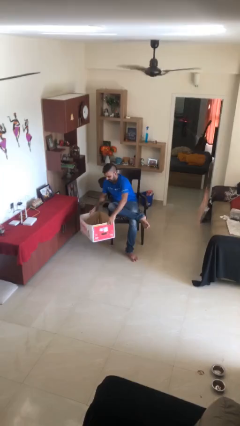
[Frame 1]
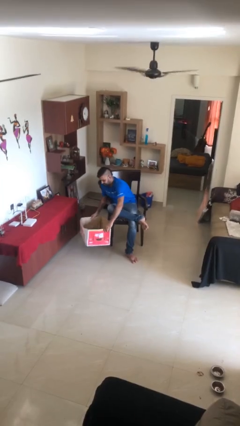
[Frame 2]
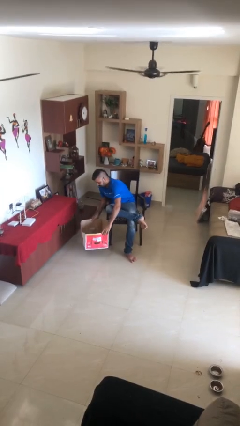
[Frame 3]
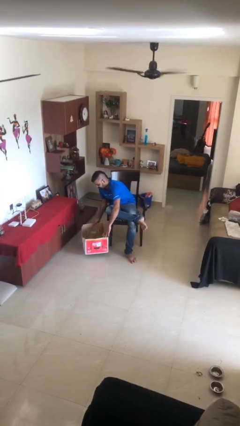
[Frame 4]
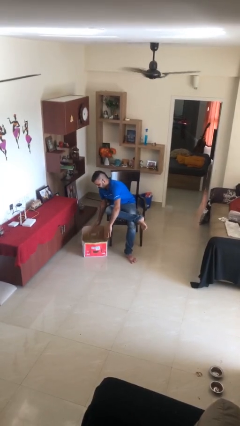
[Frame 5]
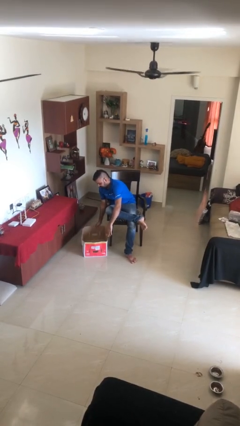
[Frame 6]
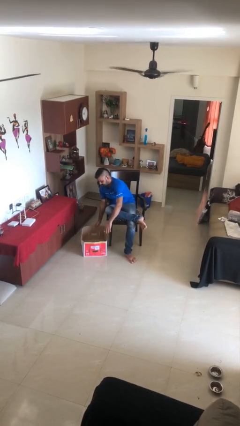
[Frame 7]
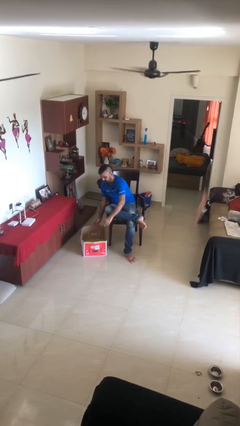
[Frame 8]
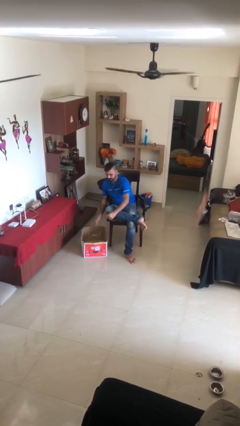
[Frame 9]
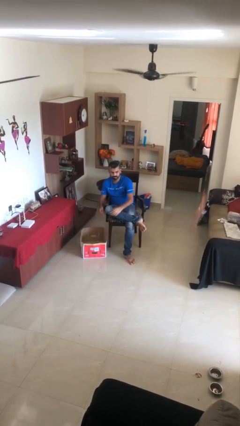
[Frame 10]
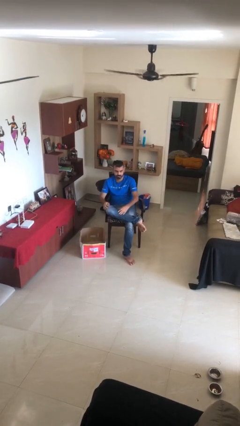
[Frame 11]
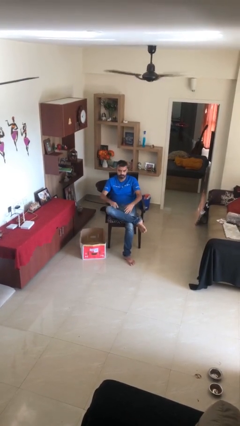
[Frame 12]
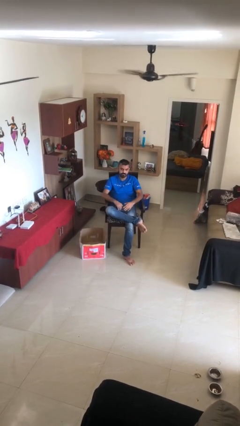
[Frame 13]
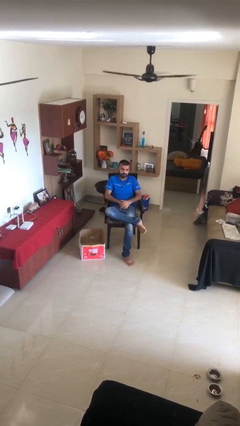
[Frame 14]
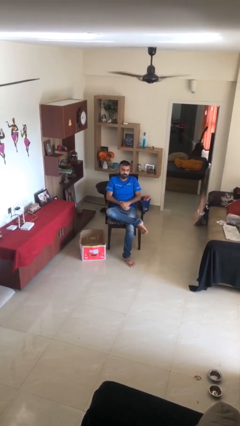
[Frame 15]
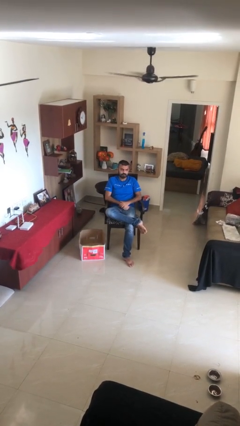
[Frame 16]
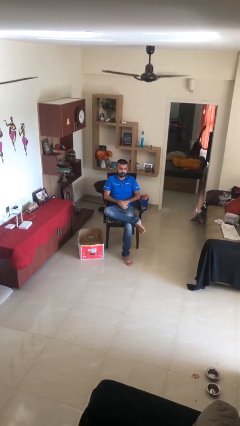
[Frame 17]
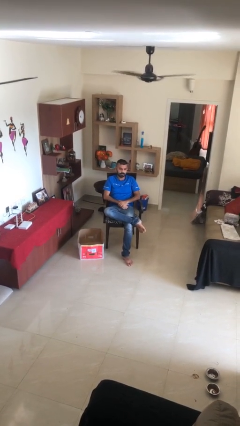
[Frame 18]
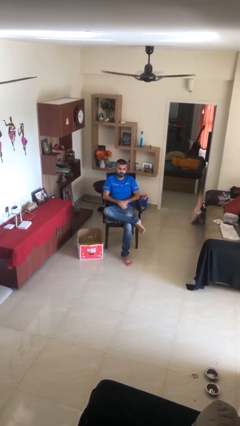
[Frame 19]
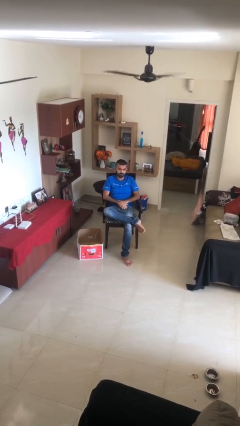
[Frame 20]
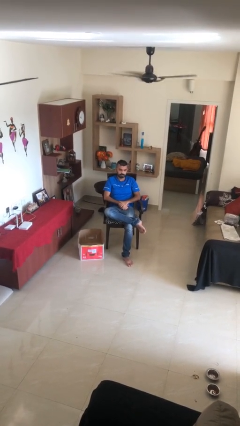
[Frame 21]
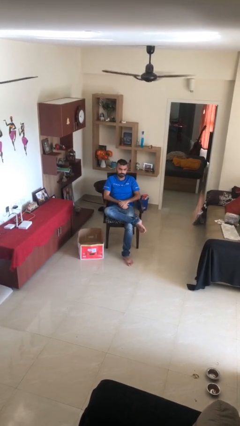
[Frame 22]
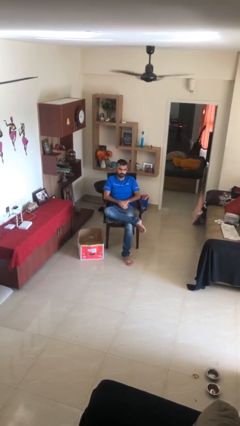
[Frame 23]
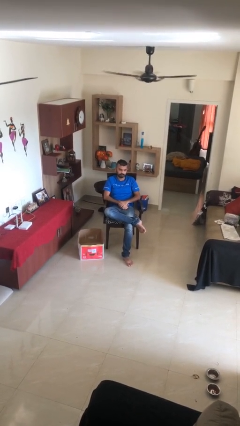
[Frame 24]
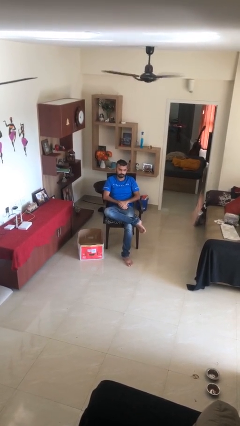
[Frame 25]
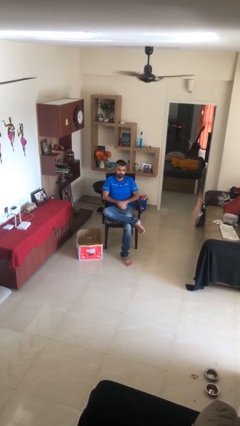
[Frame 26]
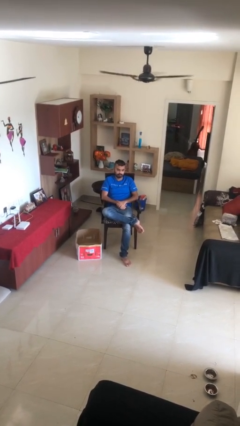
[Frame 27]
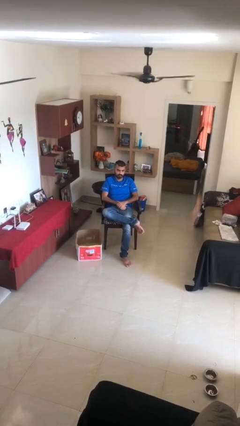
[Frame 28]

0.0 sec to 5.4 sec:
person puts down object on floor

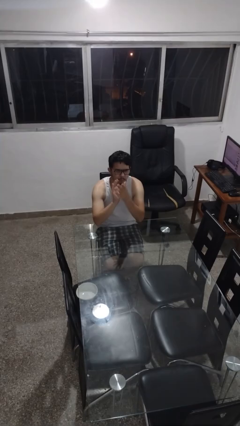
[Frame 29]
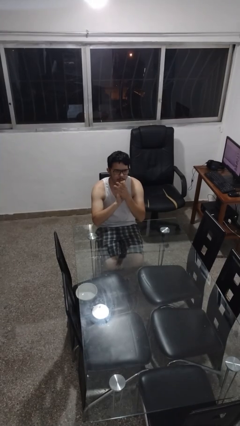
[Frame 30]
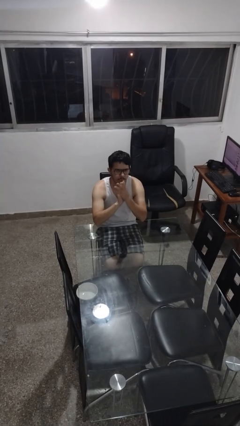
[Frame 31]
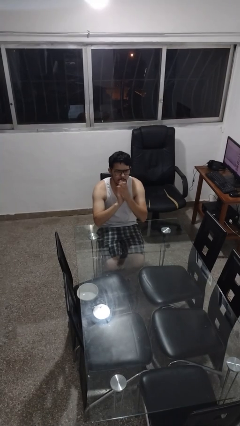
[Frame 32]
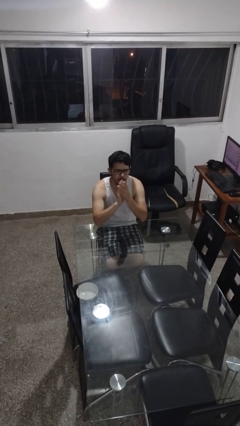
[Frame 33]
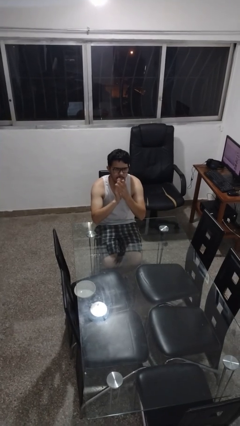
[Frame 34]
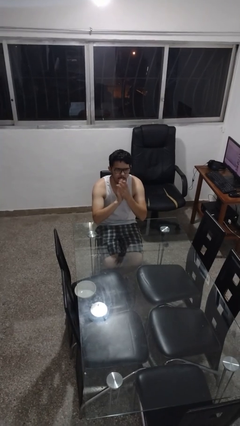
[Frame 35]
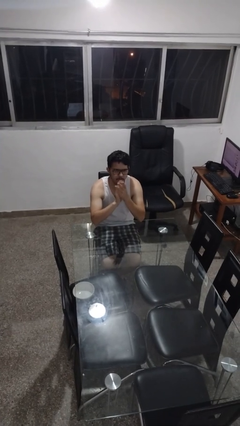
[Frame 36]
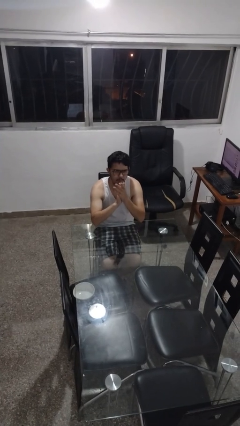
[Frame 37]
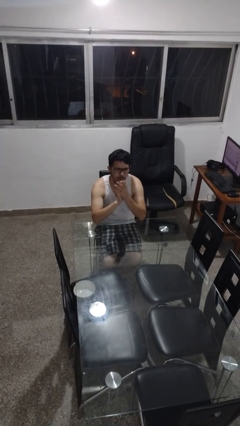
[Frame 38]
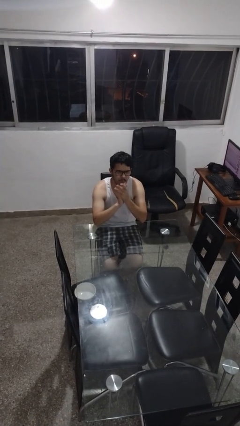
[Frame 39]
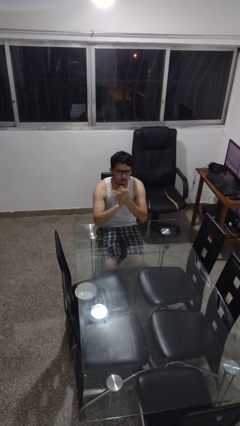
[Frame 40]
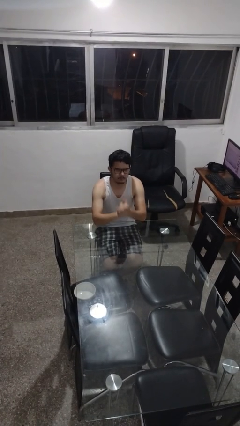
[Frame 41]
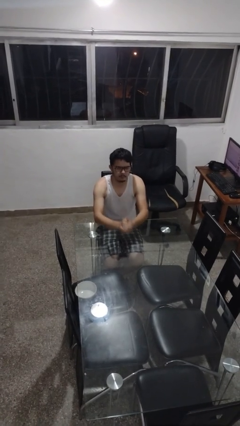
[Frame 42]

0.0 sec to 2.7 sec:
person claps hands

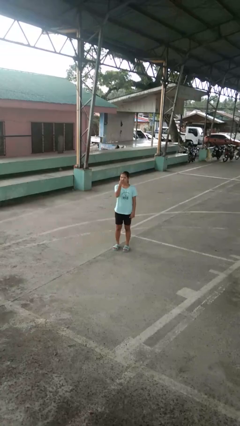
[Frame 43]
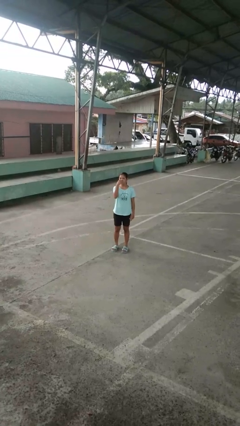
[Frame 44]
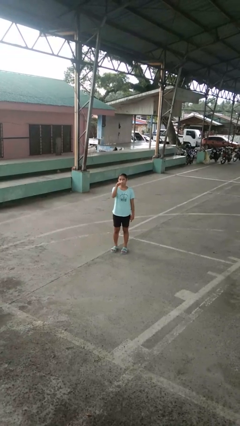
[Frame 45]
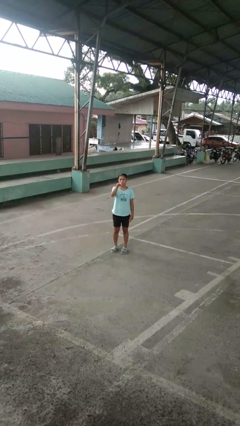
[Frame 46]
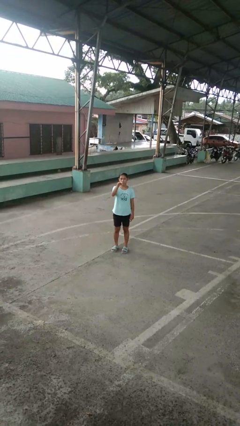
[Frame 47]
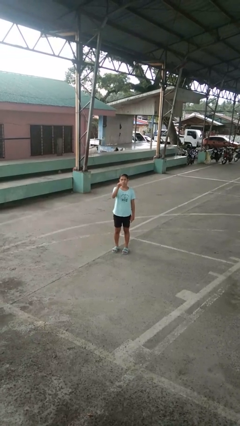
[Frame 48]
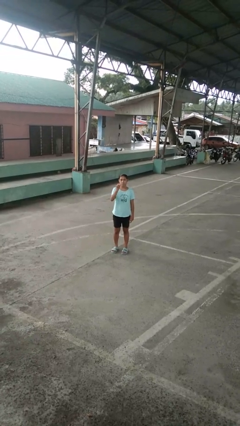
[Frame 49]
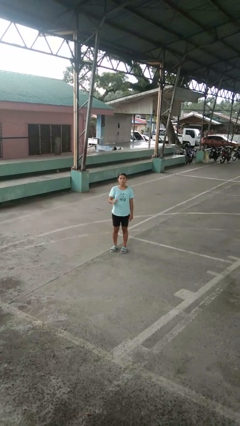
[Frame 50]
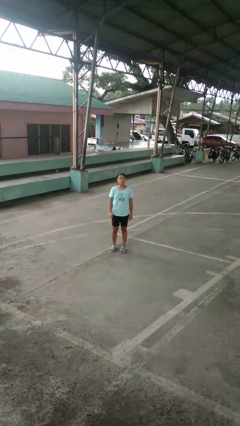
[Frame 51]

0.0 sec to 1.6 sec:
person gestures watch closely

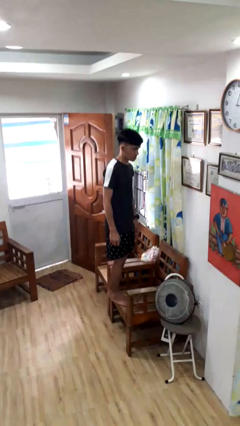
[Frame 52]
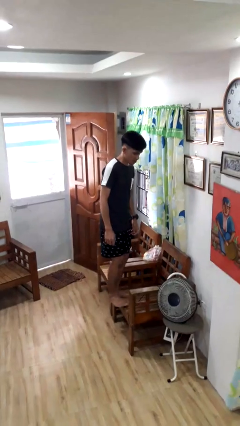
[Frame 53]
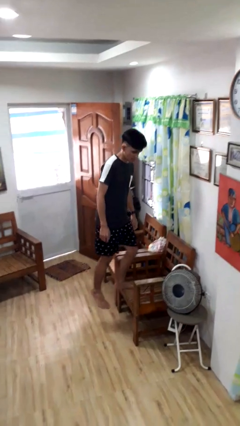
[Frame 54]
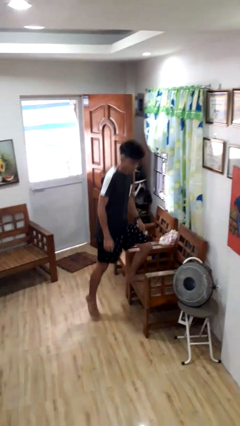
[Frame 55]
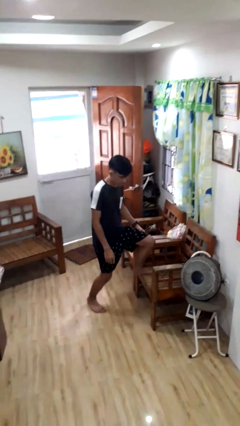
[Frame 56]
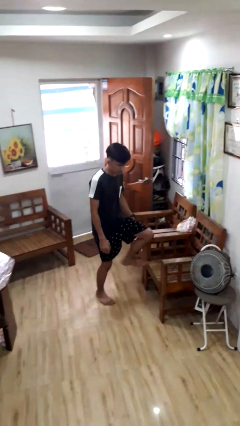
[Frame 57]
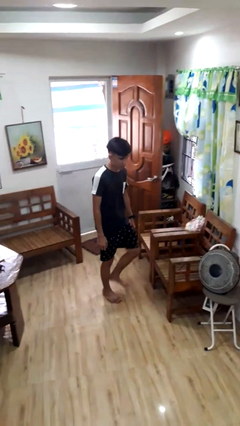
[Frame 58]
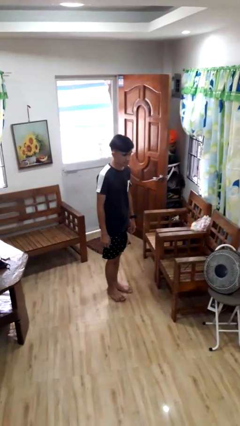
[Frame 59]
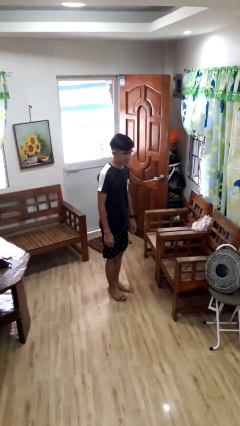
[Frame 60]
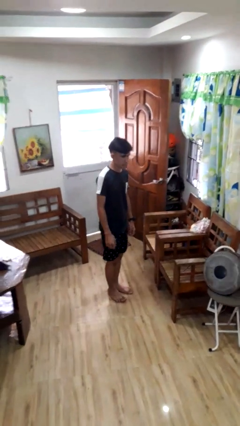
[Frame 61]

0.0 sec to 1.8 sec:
person climbs off chair

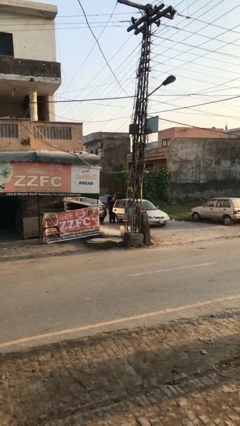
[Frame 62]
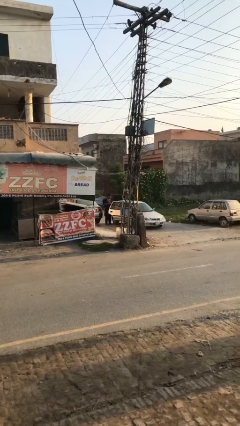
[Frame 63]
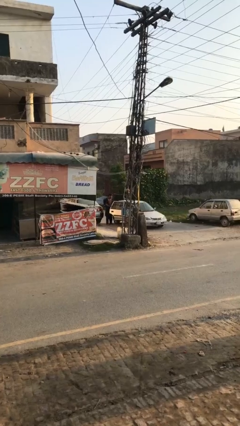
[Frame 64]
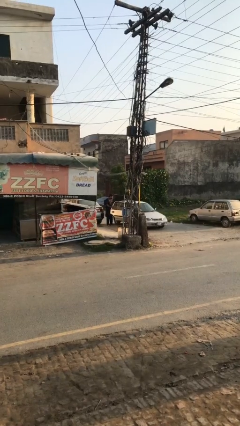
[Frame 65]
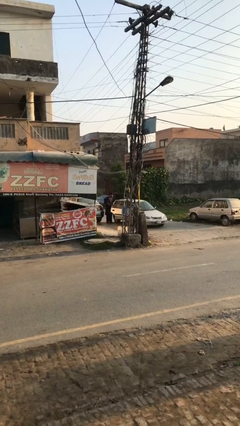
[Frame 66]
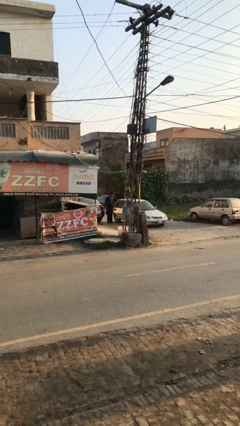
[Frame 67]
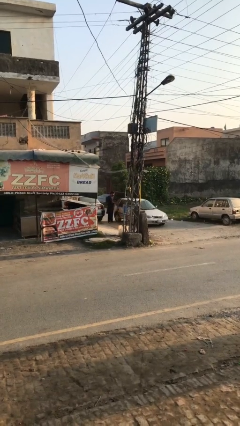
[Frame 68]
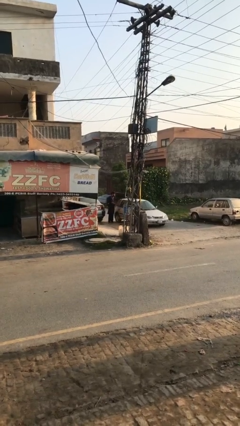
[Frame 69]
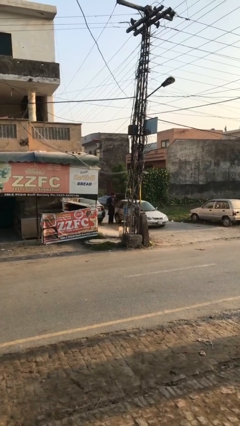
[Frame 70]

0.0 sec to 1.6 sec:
person closes car door

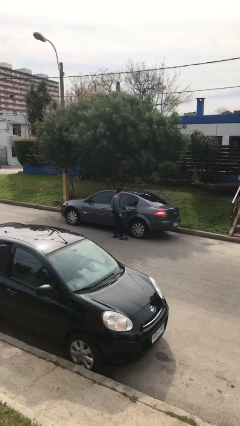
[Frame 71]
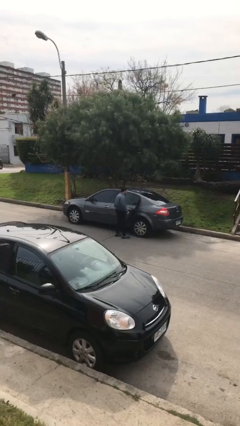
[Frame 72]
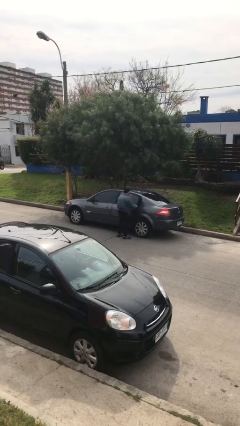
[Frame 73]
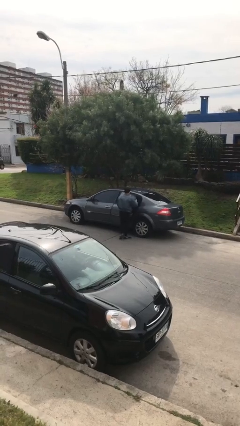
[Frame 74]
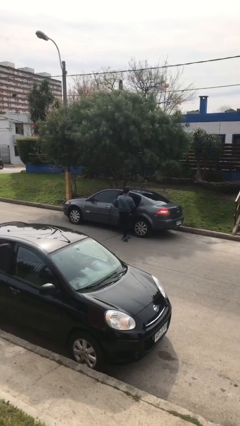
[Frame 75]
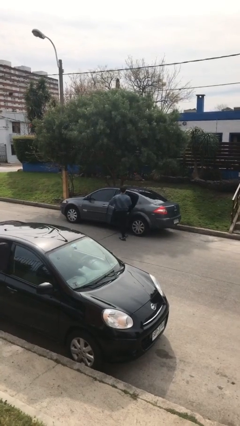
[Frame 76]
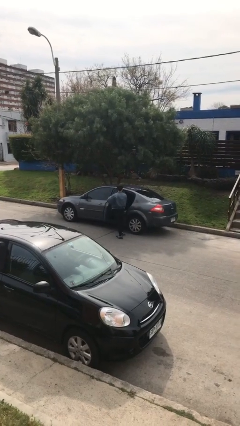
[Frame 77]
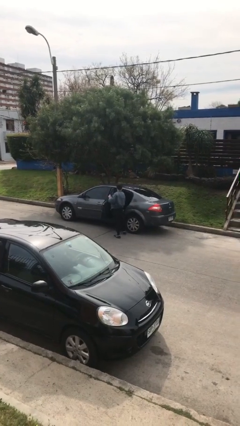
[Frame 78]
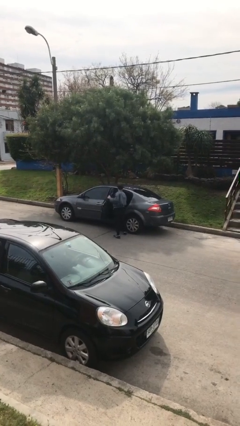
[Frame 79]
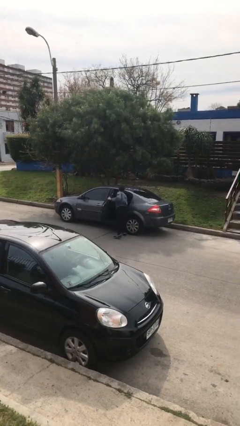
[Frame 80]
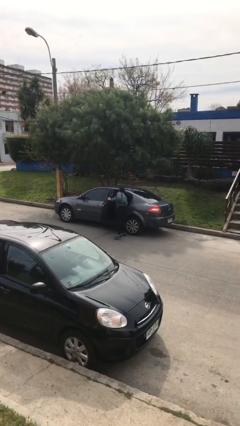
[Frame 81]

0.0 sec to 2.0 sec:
person opens car door

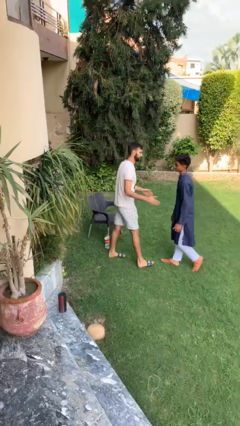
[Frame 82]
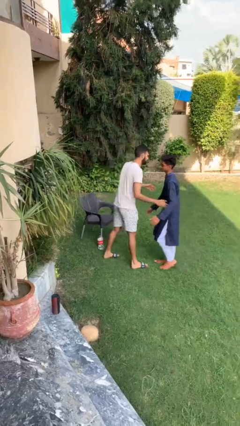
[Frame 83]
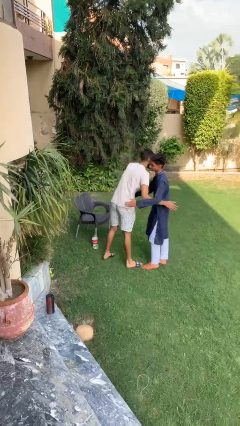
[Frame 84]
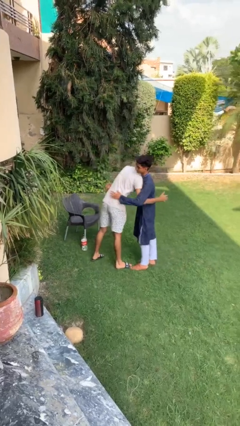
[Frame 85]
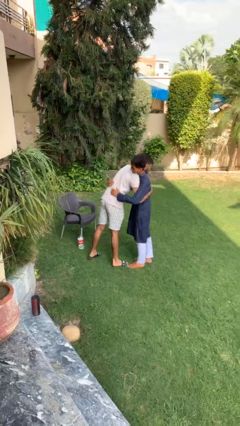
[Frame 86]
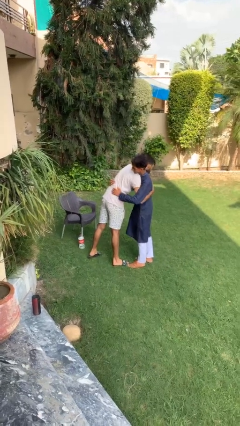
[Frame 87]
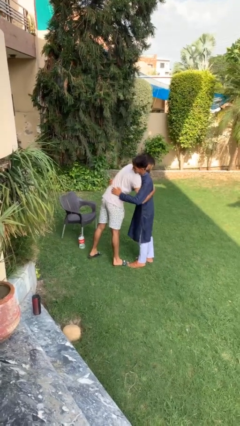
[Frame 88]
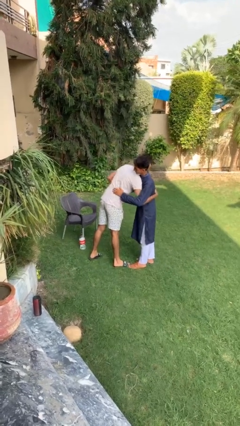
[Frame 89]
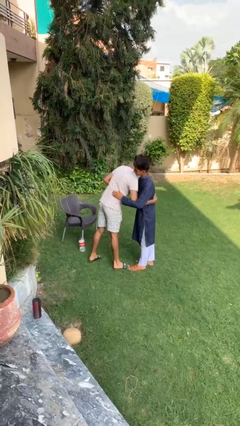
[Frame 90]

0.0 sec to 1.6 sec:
person embraces person

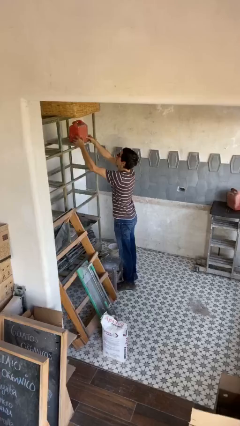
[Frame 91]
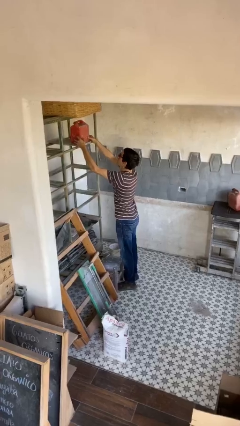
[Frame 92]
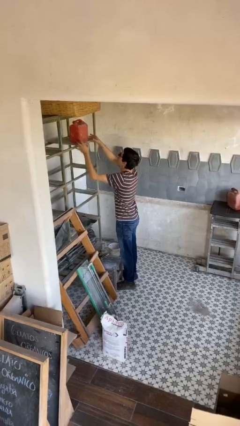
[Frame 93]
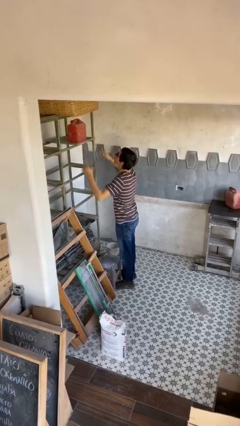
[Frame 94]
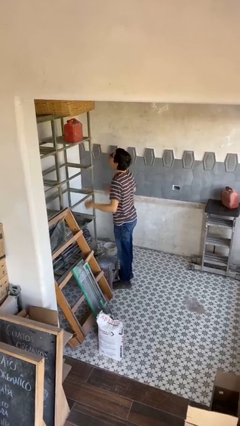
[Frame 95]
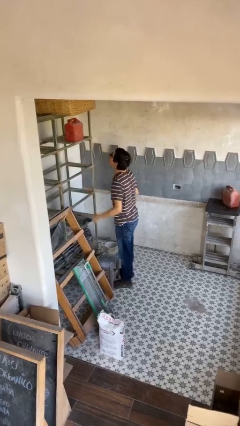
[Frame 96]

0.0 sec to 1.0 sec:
person puts down object on shelf
